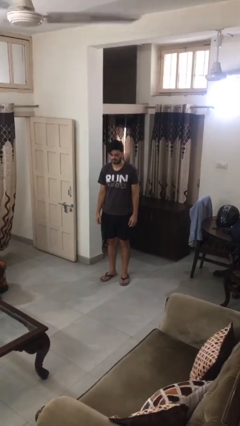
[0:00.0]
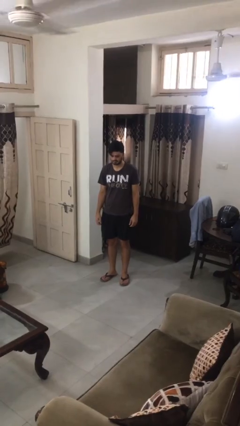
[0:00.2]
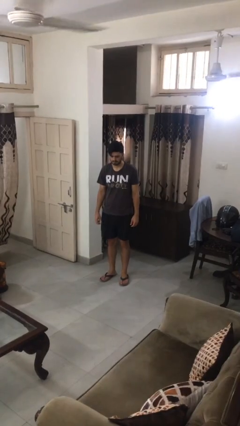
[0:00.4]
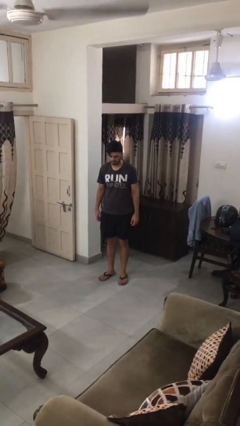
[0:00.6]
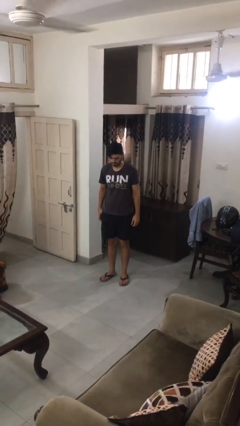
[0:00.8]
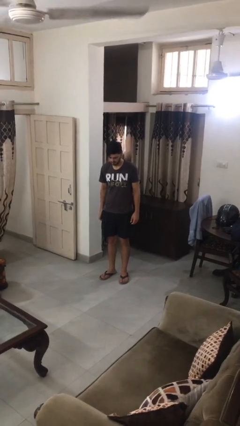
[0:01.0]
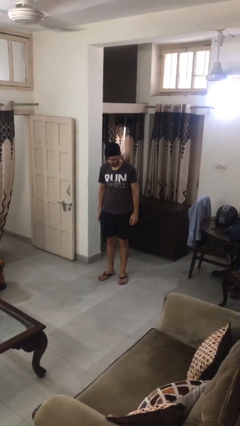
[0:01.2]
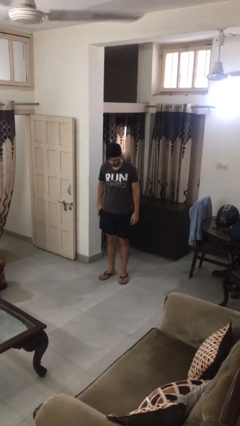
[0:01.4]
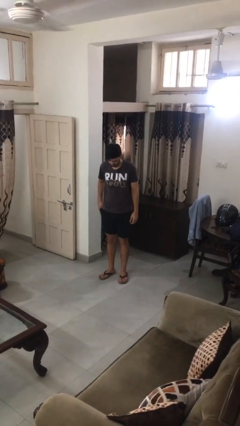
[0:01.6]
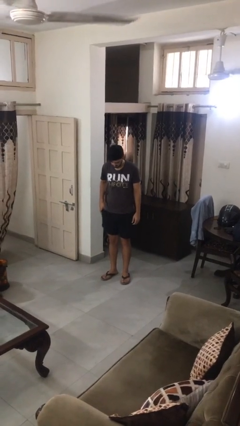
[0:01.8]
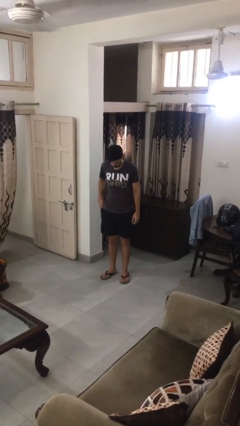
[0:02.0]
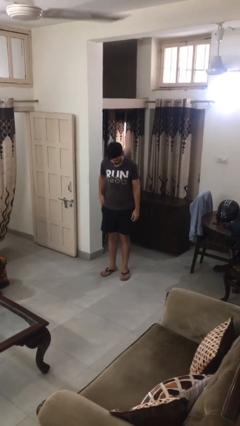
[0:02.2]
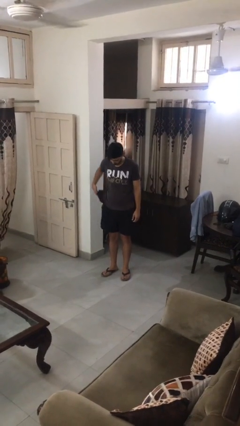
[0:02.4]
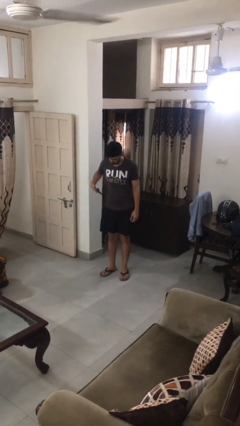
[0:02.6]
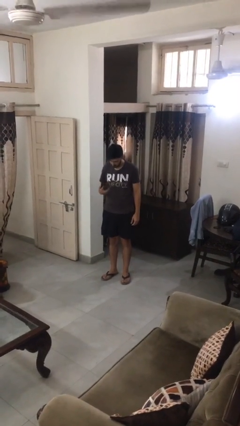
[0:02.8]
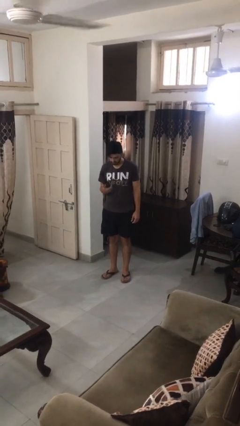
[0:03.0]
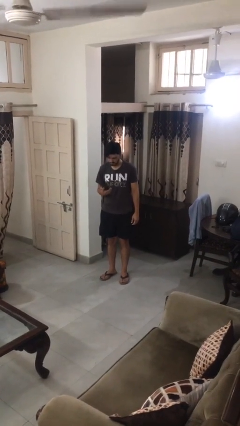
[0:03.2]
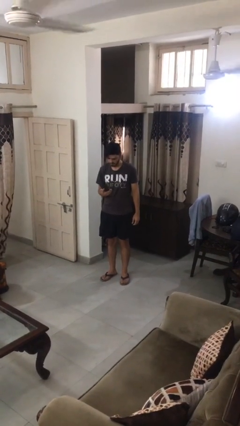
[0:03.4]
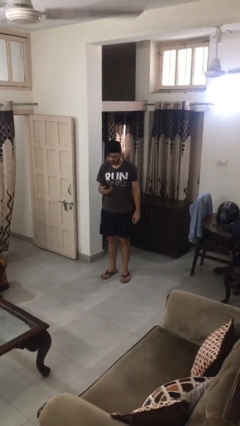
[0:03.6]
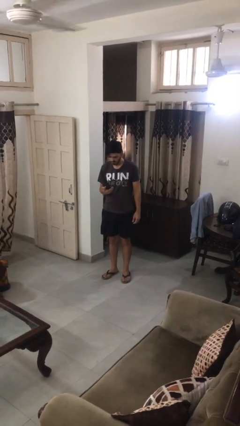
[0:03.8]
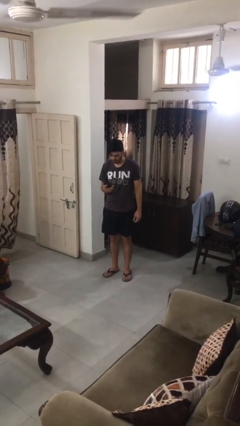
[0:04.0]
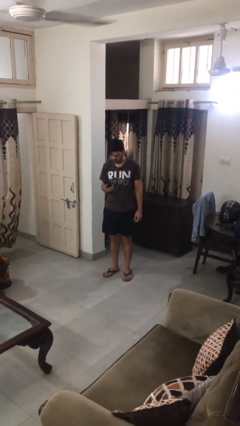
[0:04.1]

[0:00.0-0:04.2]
person takes phone from pocket

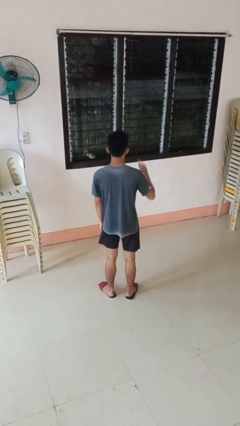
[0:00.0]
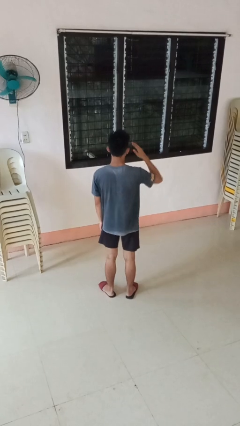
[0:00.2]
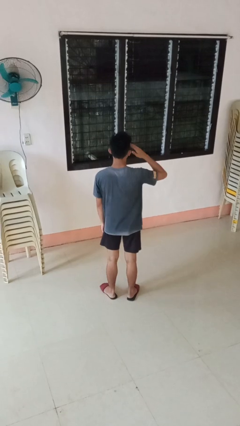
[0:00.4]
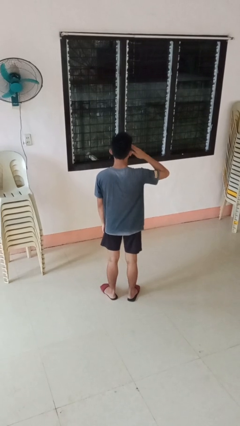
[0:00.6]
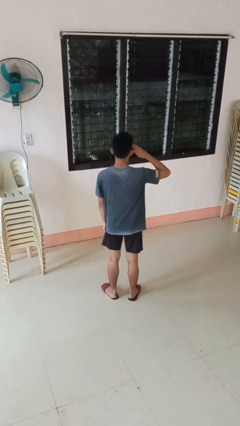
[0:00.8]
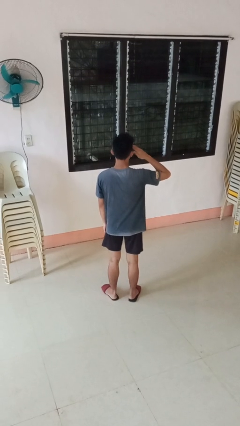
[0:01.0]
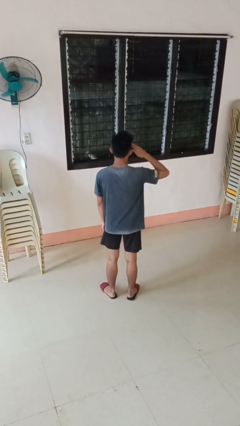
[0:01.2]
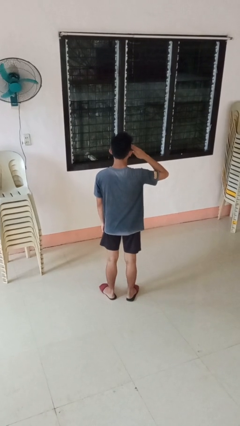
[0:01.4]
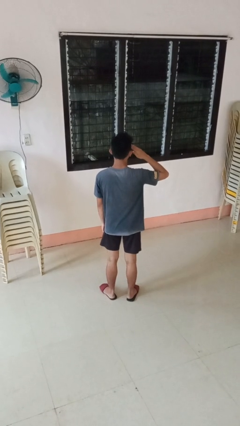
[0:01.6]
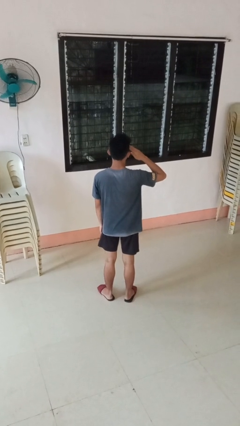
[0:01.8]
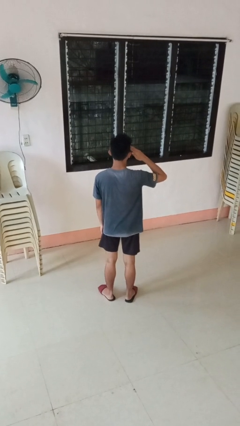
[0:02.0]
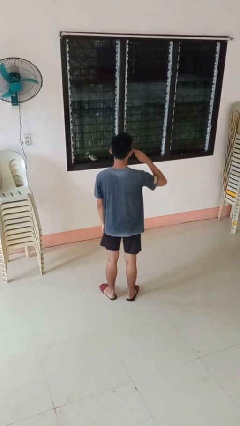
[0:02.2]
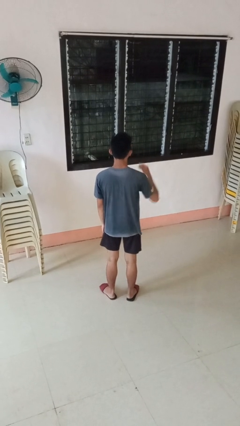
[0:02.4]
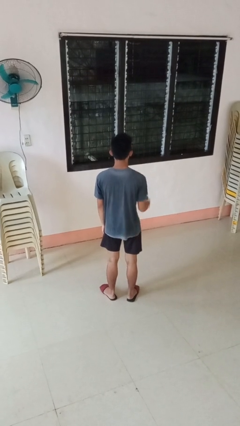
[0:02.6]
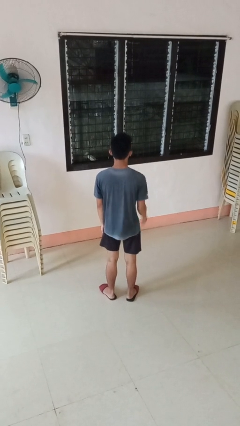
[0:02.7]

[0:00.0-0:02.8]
person salutes

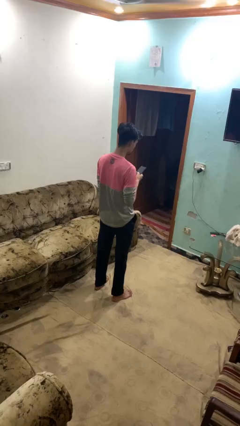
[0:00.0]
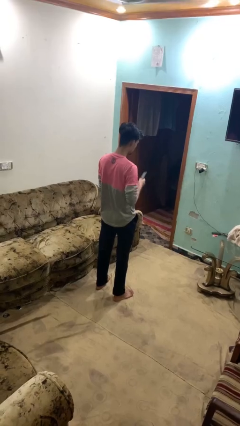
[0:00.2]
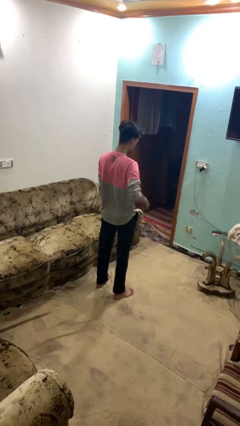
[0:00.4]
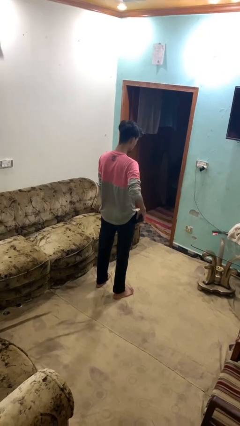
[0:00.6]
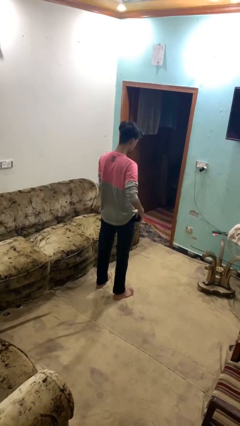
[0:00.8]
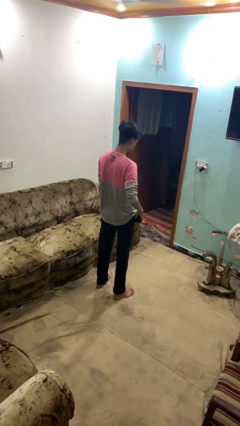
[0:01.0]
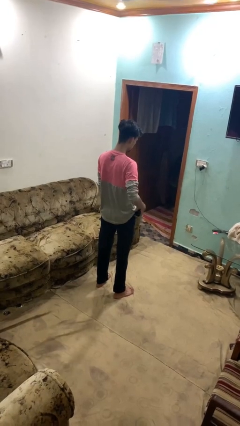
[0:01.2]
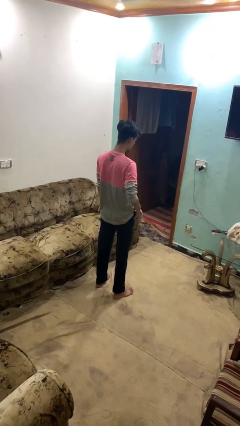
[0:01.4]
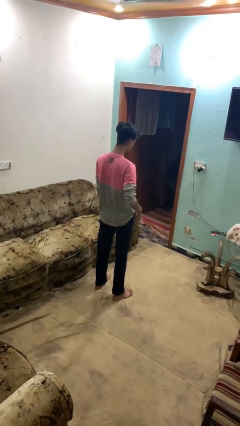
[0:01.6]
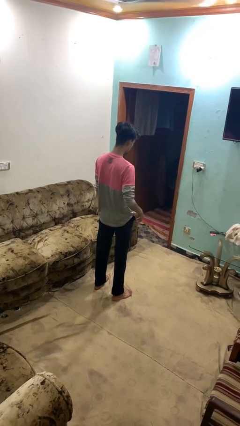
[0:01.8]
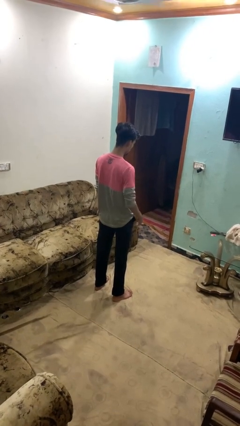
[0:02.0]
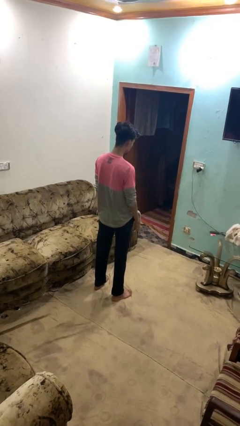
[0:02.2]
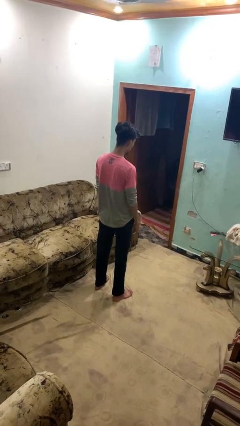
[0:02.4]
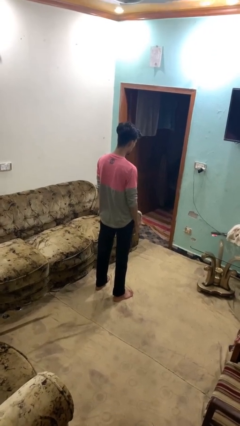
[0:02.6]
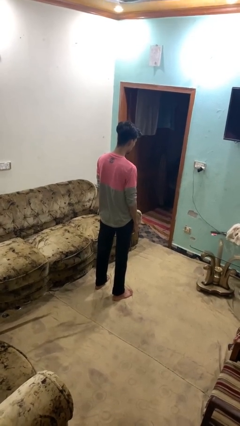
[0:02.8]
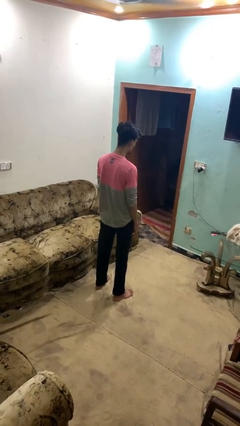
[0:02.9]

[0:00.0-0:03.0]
person puts phone into pocket

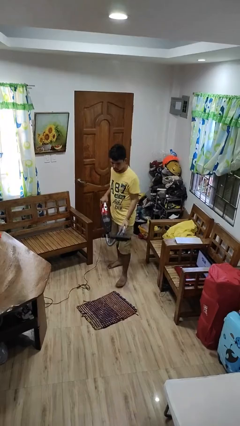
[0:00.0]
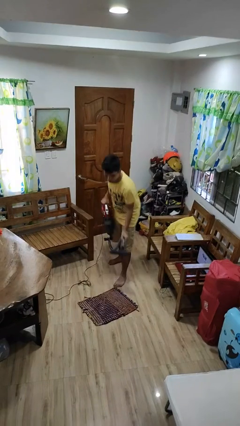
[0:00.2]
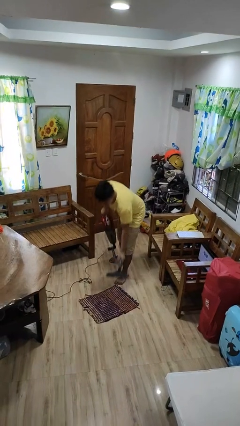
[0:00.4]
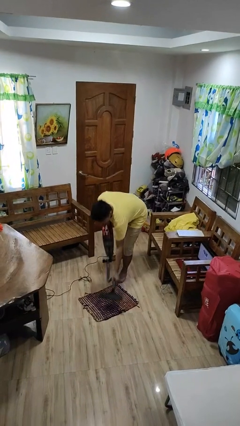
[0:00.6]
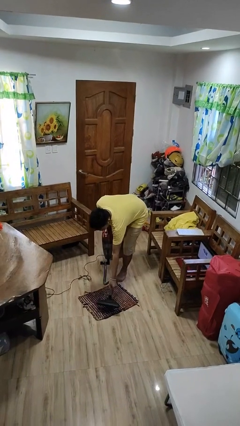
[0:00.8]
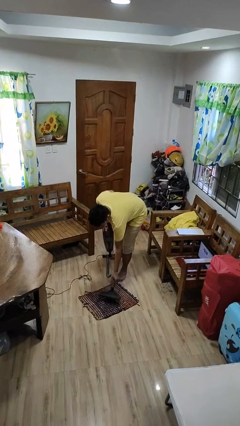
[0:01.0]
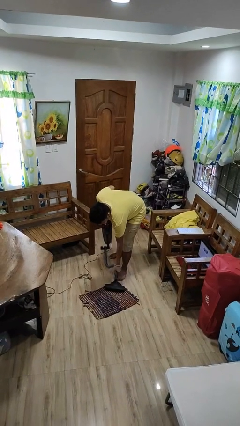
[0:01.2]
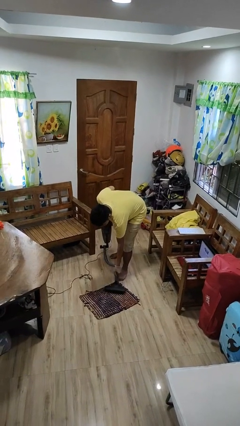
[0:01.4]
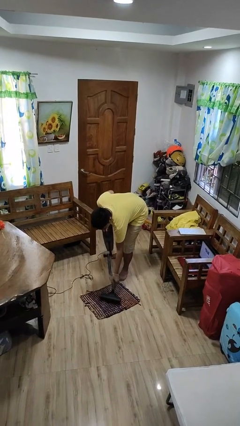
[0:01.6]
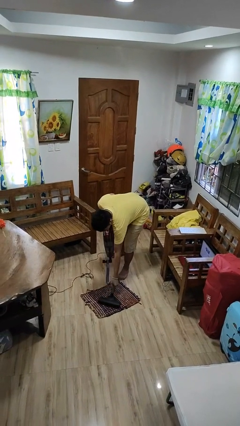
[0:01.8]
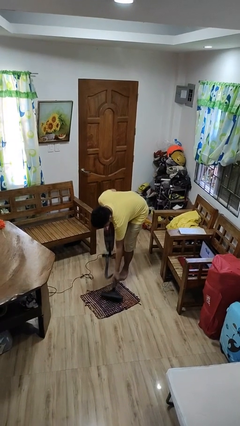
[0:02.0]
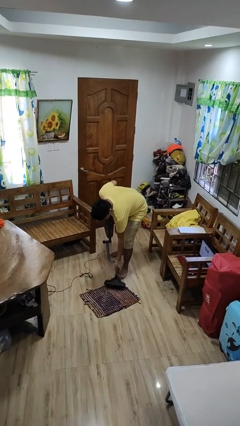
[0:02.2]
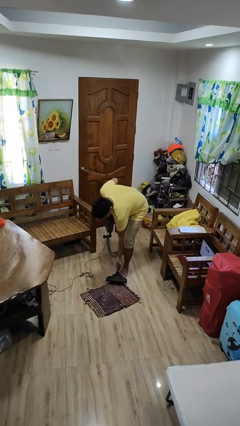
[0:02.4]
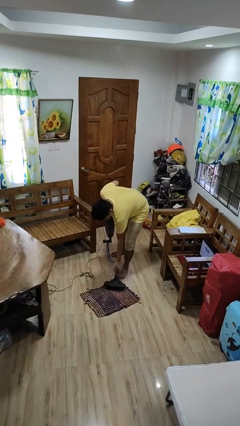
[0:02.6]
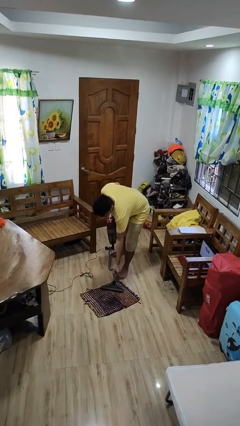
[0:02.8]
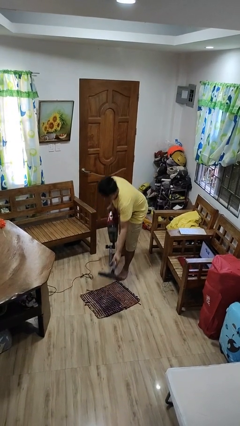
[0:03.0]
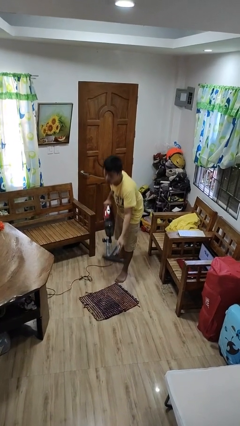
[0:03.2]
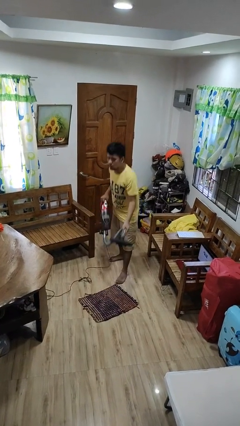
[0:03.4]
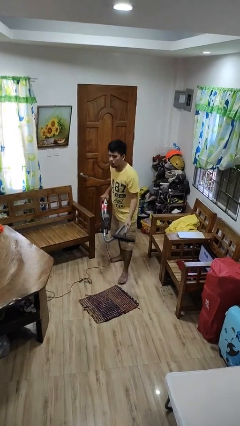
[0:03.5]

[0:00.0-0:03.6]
person vacuums carpet

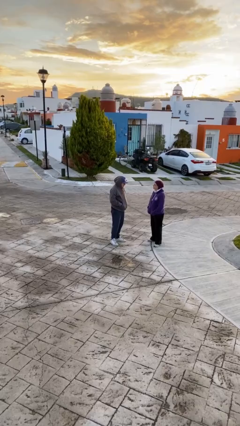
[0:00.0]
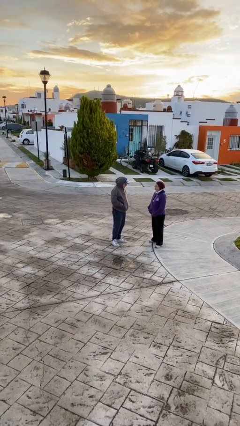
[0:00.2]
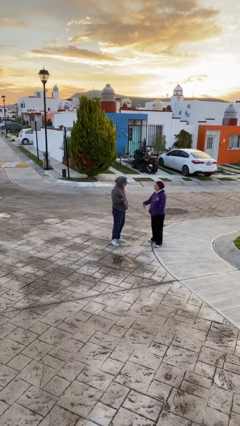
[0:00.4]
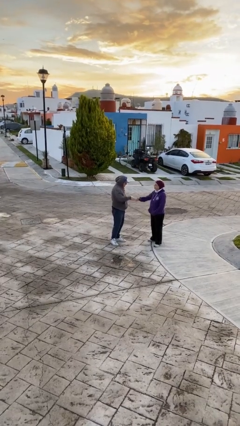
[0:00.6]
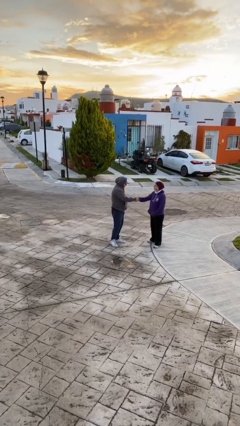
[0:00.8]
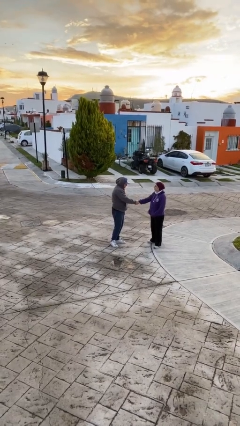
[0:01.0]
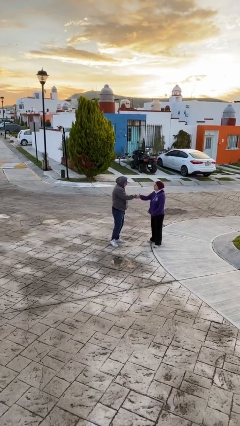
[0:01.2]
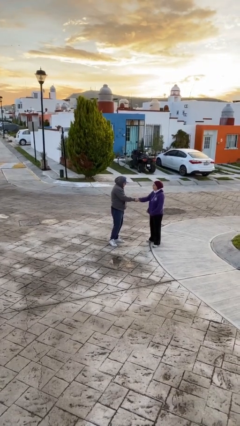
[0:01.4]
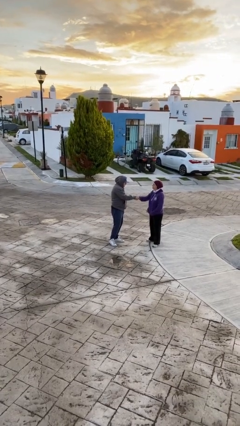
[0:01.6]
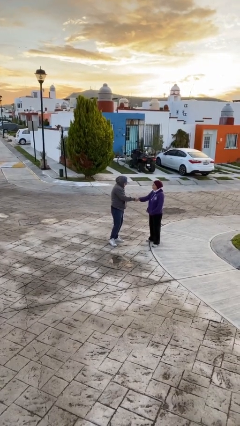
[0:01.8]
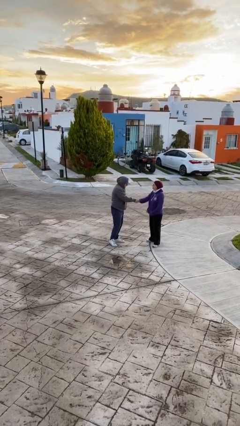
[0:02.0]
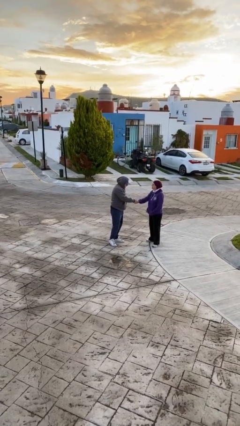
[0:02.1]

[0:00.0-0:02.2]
person shakes hand

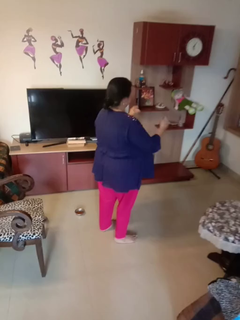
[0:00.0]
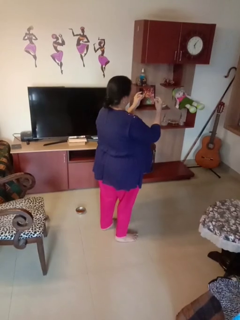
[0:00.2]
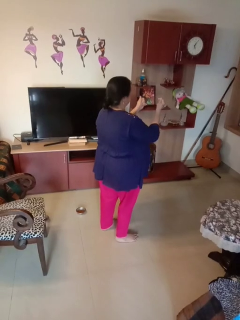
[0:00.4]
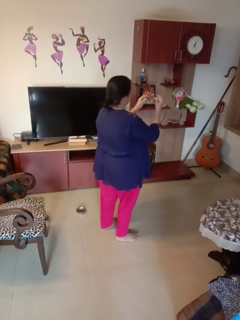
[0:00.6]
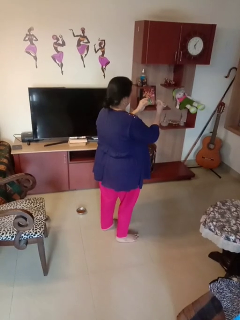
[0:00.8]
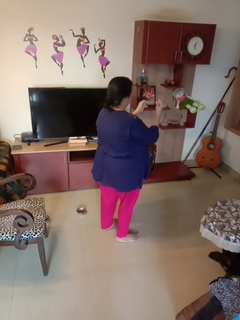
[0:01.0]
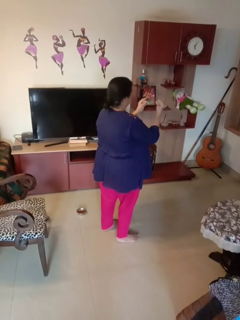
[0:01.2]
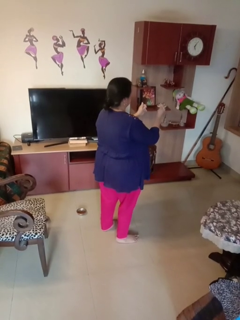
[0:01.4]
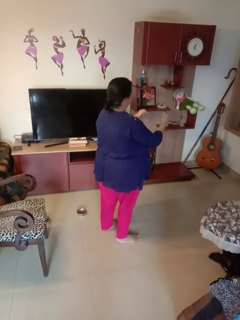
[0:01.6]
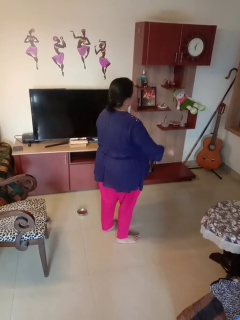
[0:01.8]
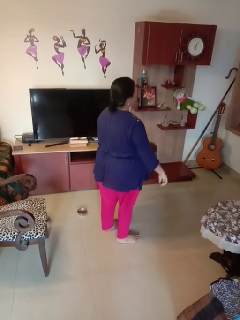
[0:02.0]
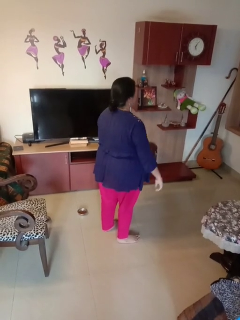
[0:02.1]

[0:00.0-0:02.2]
person snaps fingers
